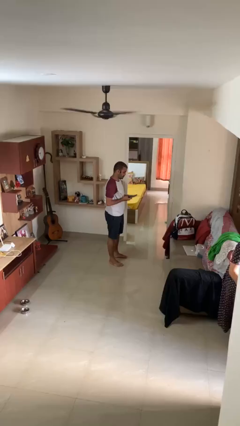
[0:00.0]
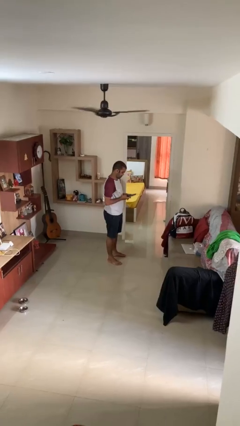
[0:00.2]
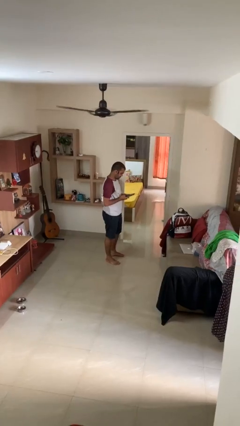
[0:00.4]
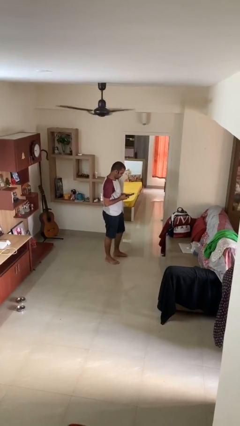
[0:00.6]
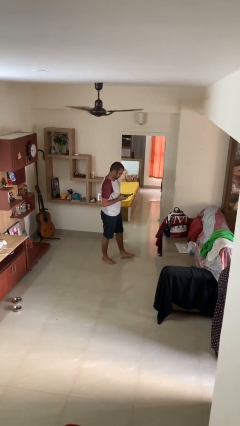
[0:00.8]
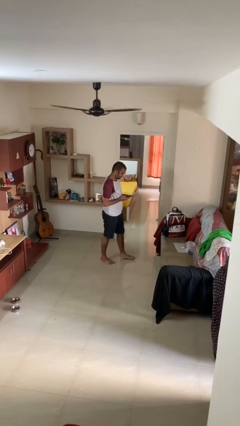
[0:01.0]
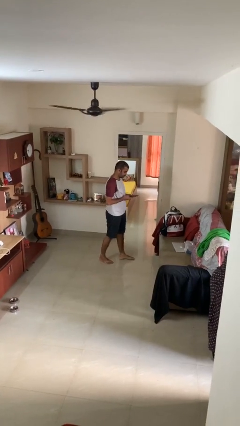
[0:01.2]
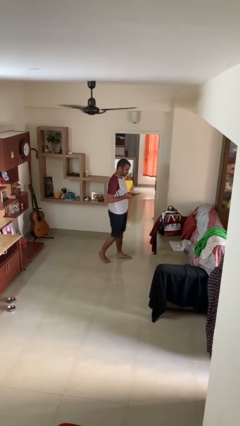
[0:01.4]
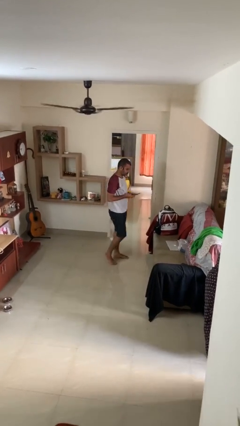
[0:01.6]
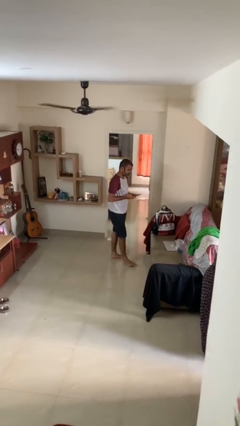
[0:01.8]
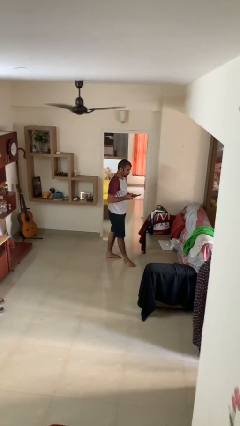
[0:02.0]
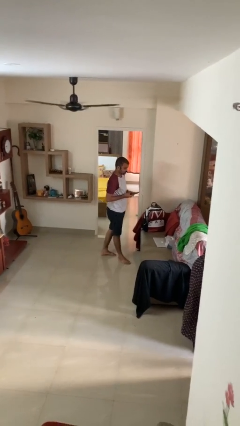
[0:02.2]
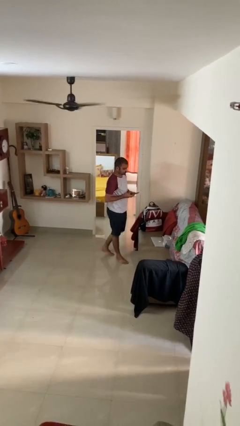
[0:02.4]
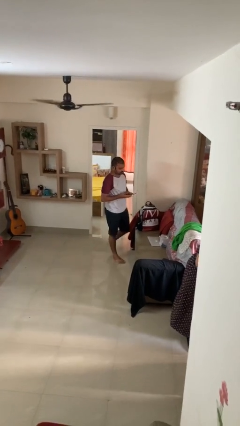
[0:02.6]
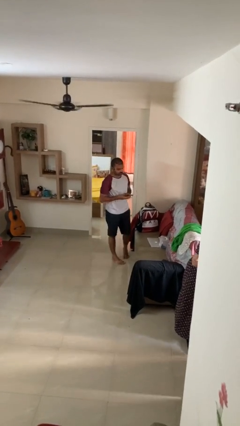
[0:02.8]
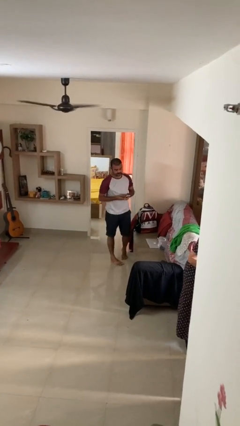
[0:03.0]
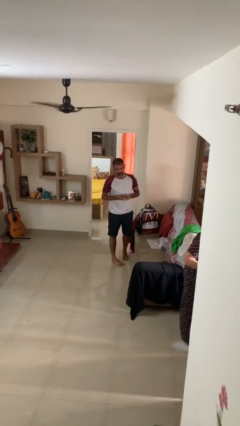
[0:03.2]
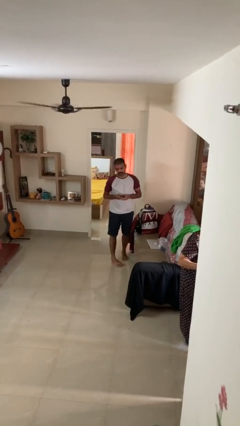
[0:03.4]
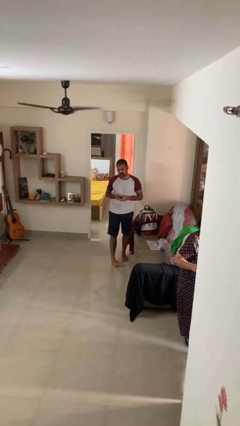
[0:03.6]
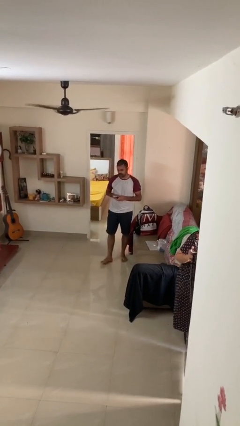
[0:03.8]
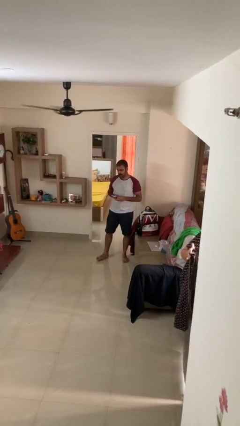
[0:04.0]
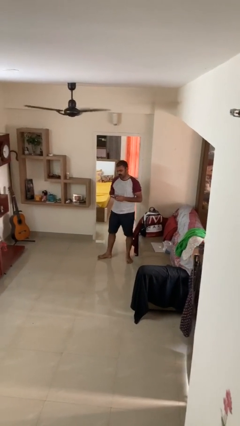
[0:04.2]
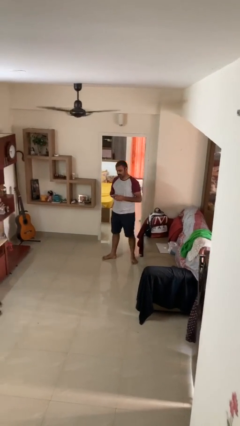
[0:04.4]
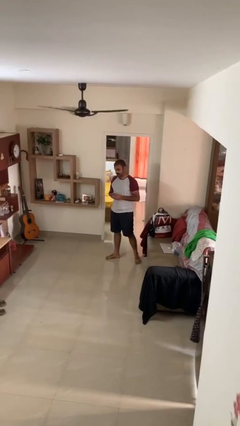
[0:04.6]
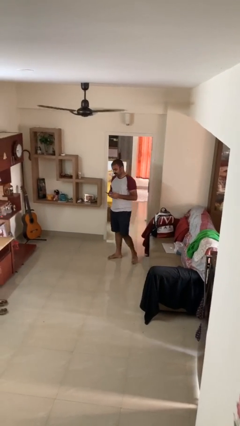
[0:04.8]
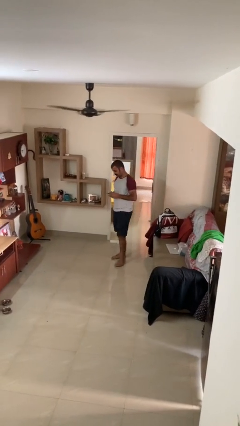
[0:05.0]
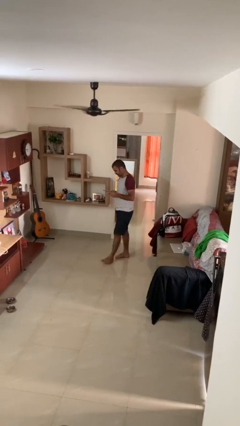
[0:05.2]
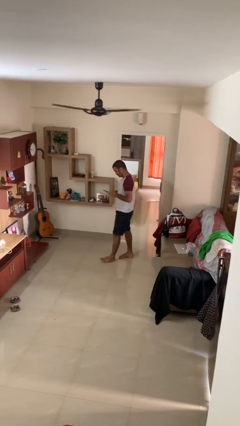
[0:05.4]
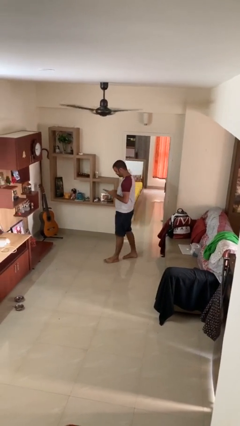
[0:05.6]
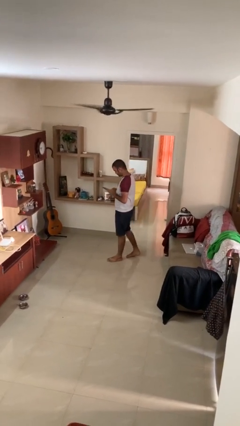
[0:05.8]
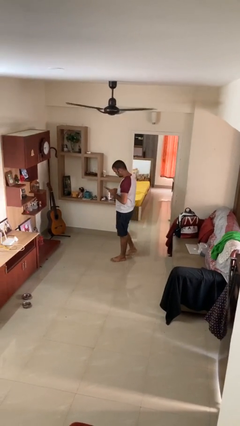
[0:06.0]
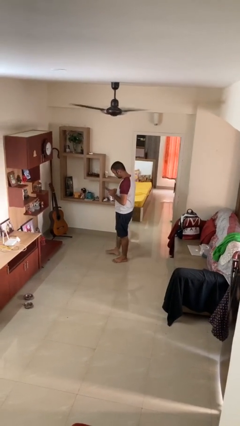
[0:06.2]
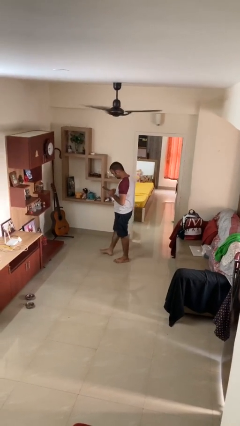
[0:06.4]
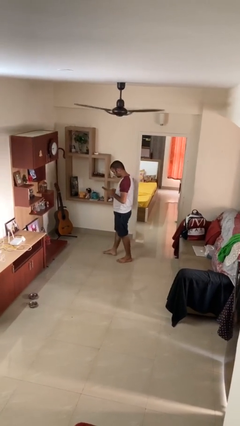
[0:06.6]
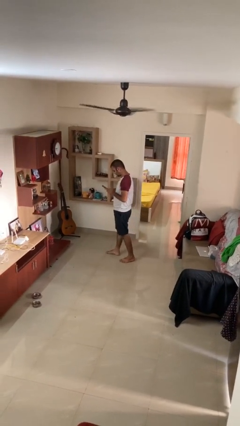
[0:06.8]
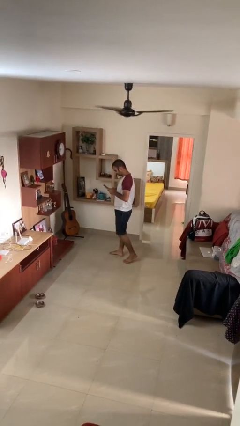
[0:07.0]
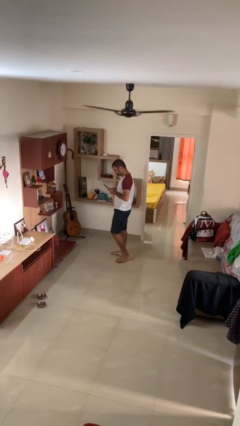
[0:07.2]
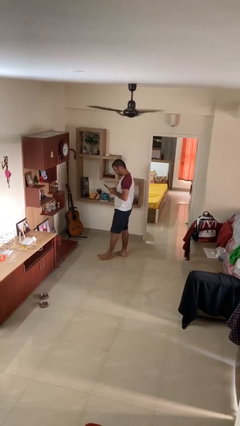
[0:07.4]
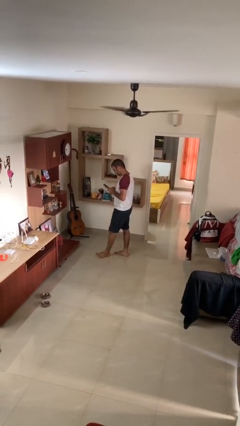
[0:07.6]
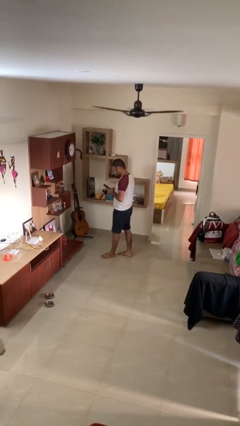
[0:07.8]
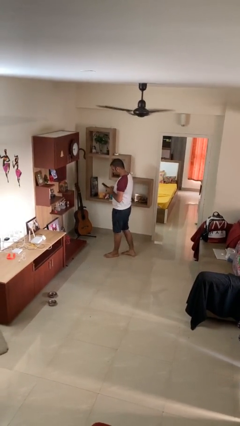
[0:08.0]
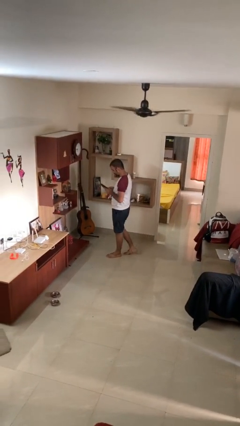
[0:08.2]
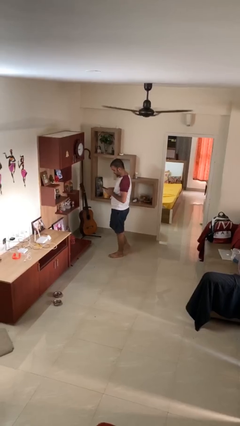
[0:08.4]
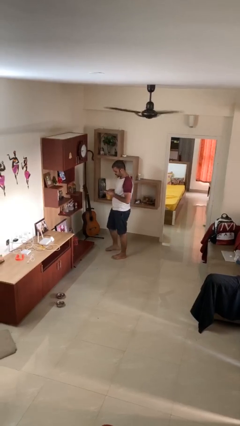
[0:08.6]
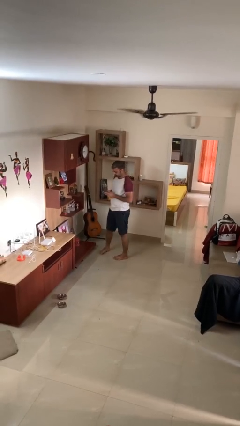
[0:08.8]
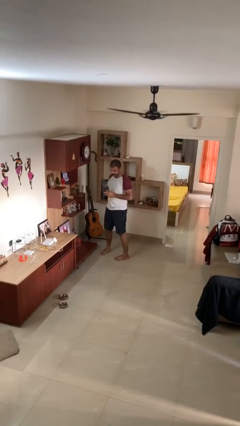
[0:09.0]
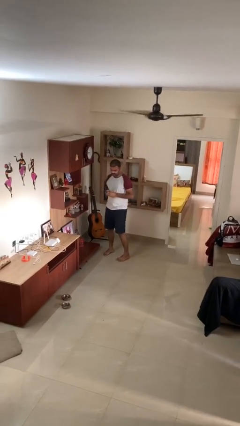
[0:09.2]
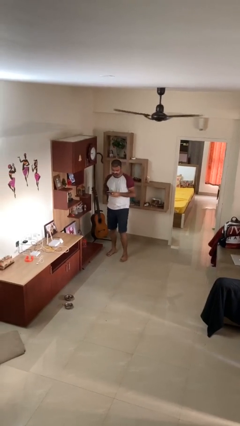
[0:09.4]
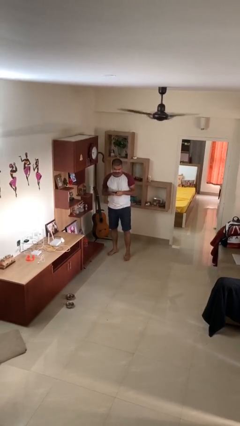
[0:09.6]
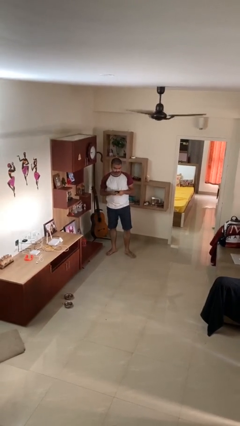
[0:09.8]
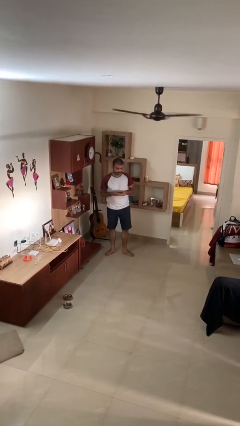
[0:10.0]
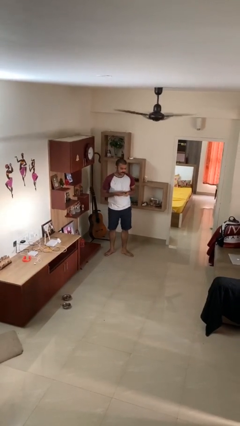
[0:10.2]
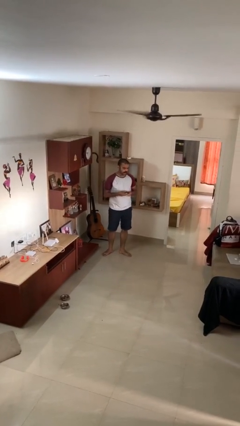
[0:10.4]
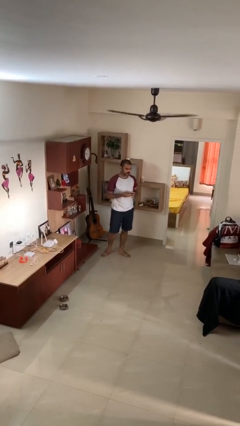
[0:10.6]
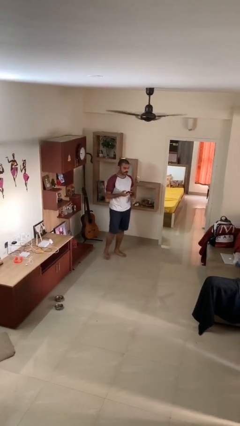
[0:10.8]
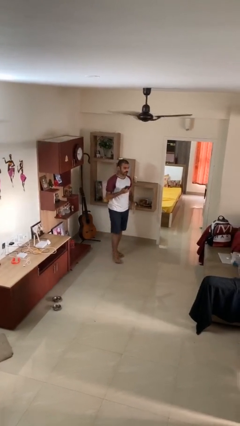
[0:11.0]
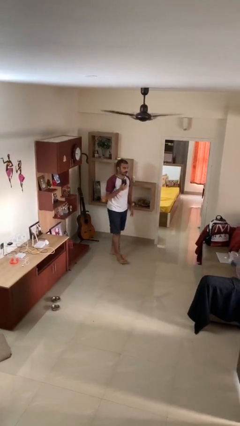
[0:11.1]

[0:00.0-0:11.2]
person texts on phone

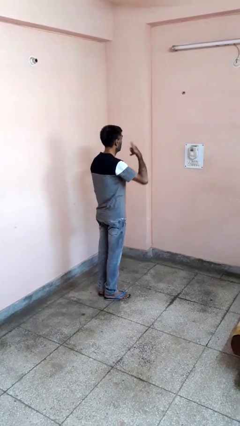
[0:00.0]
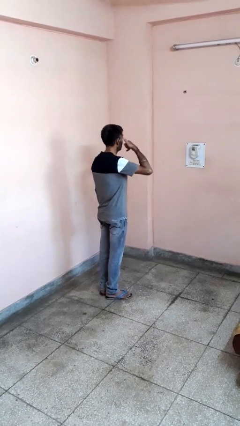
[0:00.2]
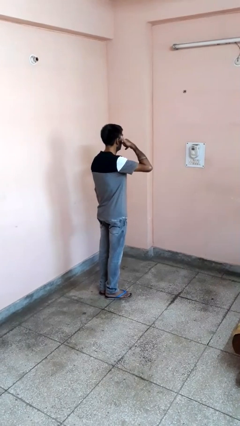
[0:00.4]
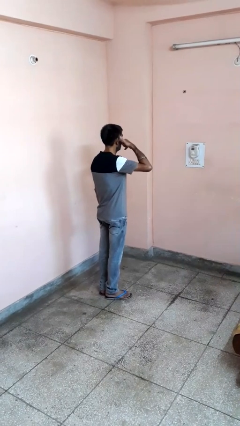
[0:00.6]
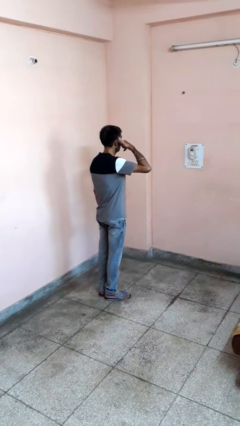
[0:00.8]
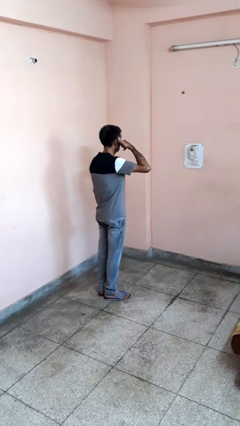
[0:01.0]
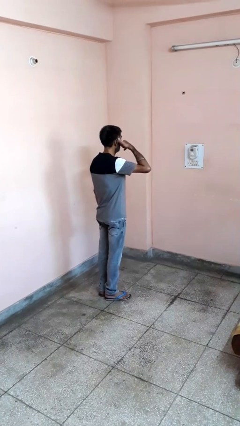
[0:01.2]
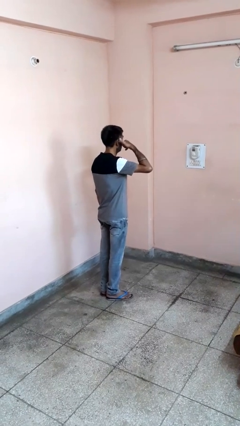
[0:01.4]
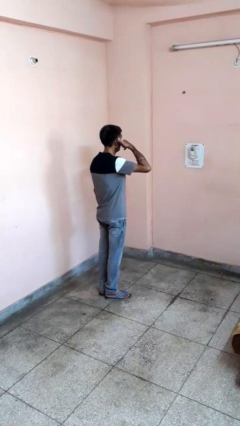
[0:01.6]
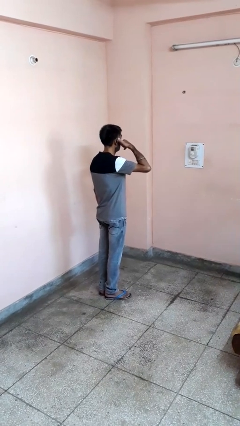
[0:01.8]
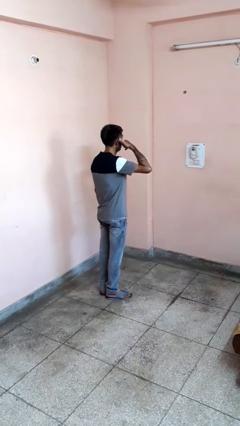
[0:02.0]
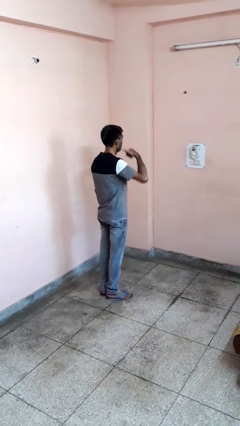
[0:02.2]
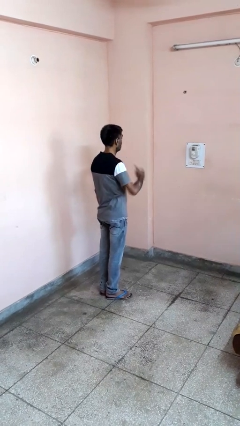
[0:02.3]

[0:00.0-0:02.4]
person gestures call me

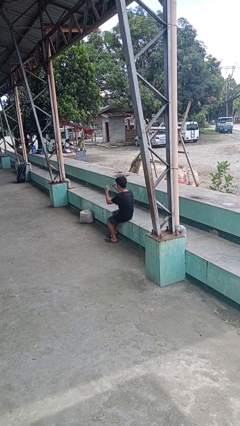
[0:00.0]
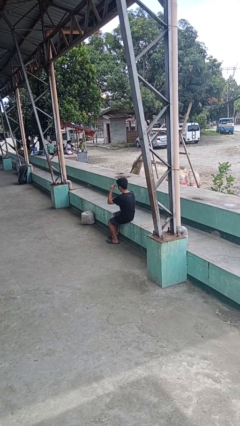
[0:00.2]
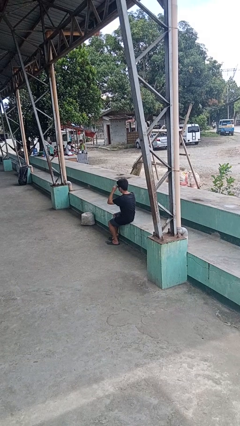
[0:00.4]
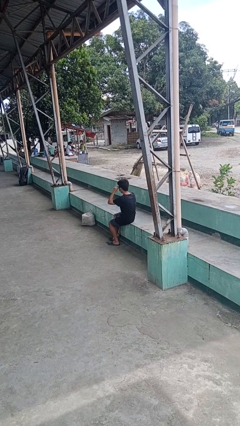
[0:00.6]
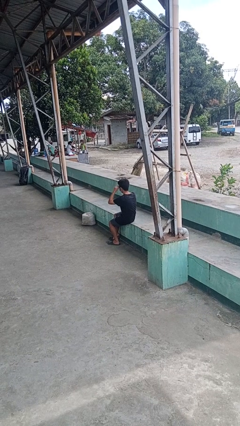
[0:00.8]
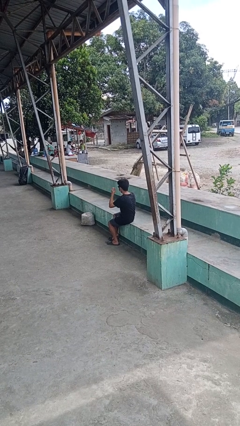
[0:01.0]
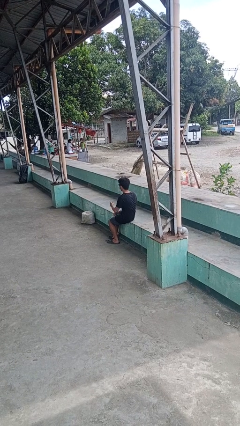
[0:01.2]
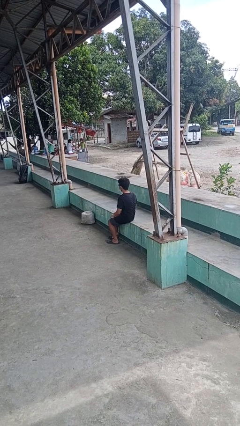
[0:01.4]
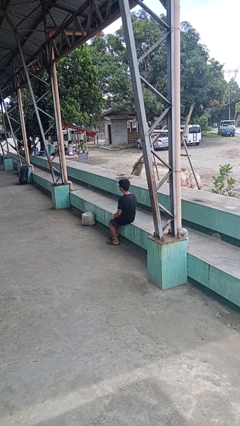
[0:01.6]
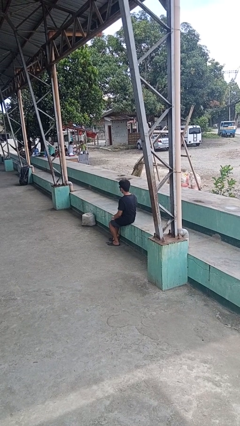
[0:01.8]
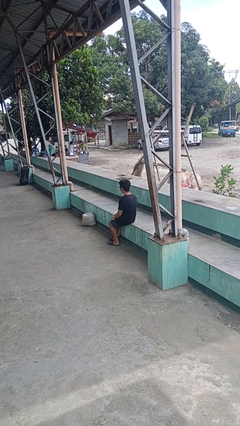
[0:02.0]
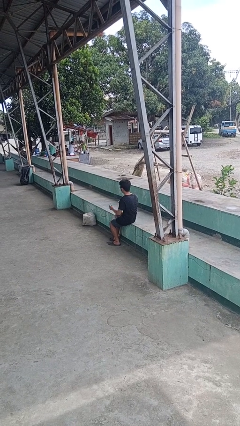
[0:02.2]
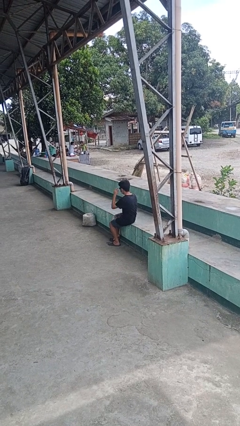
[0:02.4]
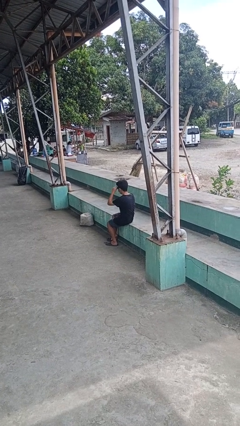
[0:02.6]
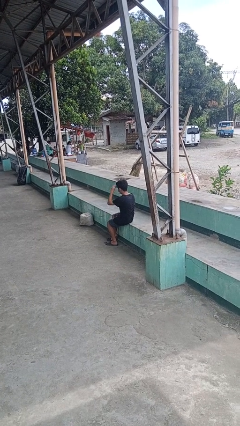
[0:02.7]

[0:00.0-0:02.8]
person puts on sunglasses

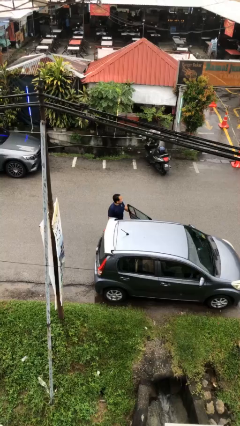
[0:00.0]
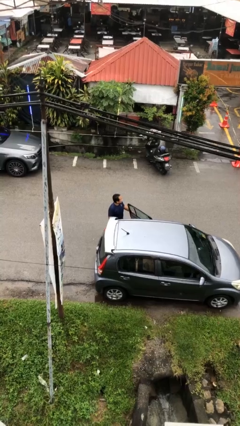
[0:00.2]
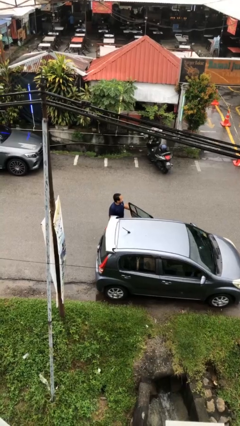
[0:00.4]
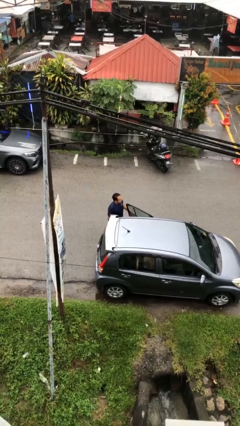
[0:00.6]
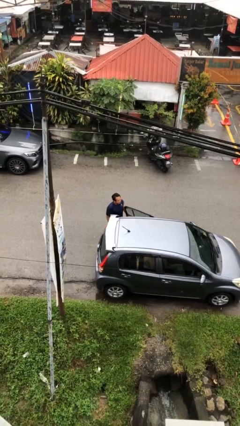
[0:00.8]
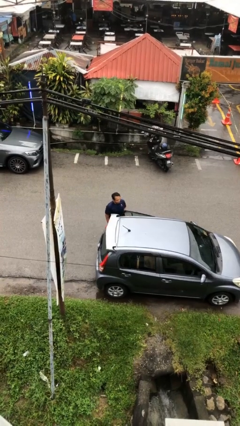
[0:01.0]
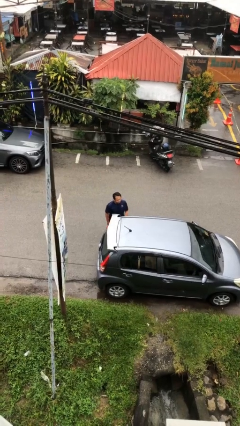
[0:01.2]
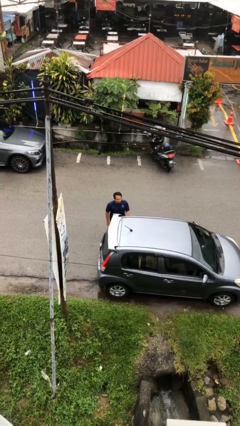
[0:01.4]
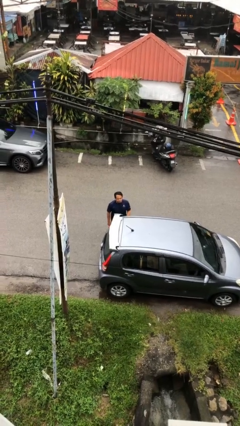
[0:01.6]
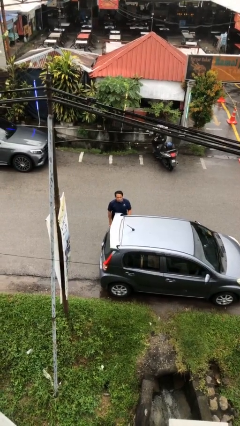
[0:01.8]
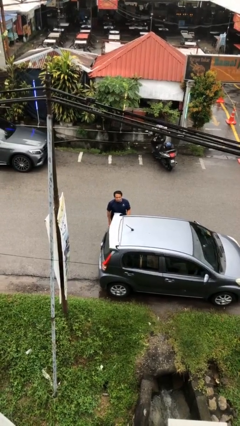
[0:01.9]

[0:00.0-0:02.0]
person closes car door
